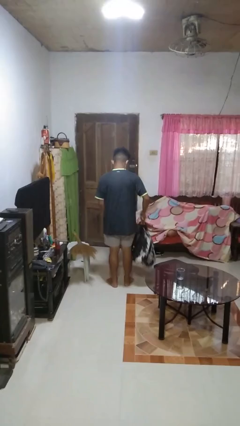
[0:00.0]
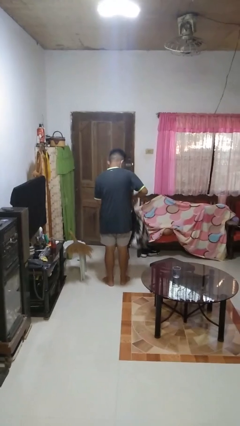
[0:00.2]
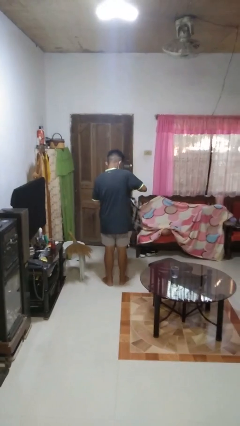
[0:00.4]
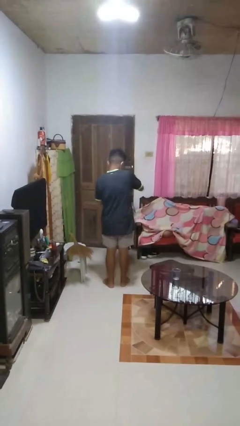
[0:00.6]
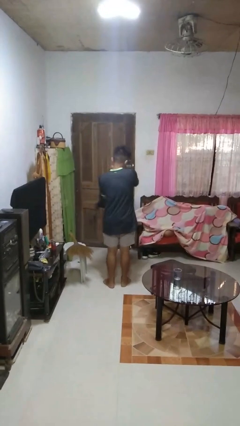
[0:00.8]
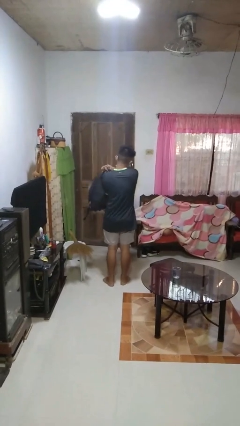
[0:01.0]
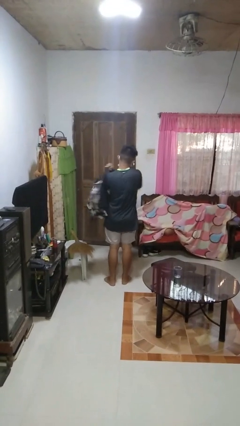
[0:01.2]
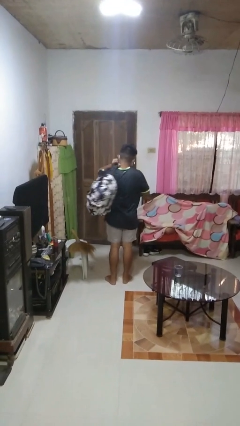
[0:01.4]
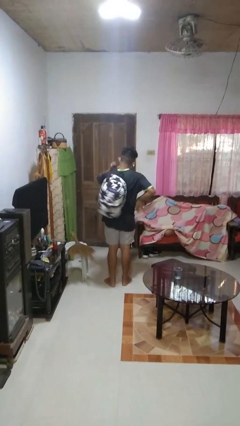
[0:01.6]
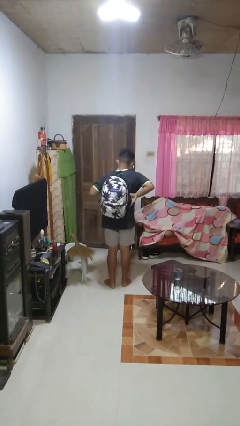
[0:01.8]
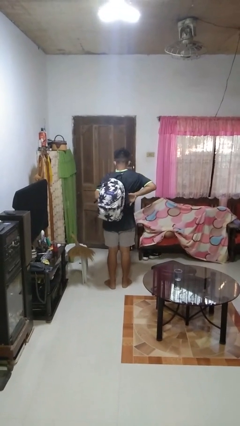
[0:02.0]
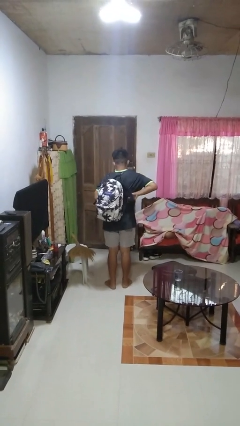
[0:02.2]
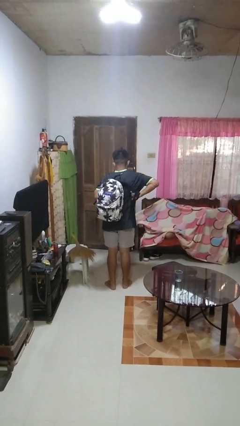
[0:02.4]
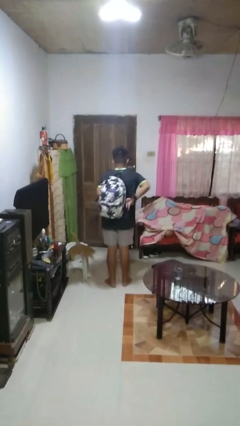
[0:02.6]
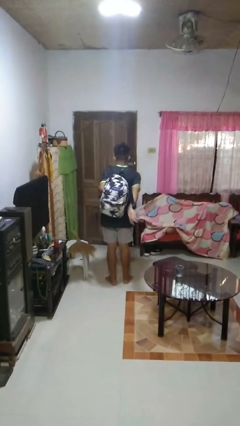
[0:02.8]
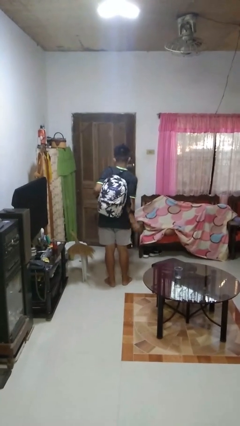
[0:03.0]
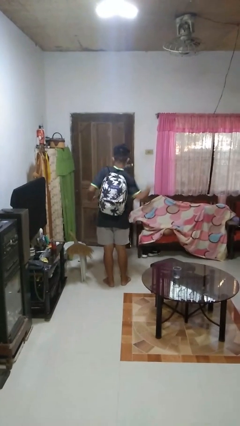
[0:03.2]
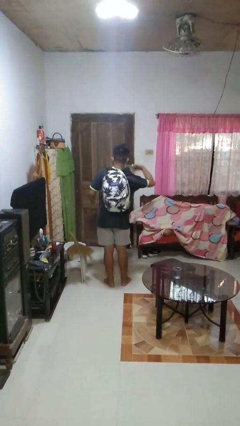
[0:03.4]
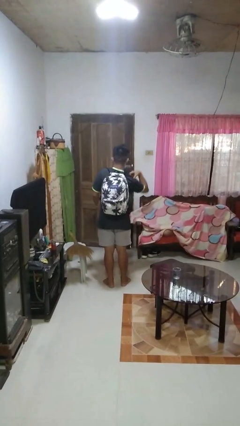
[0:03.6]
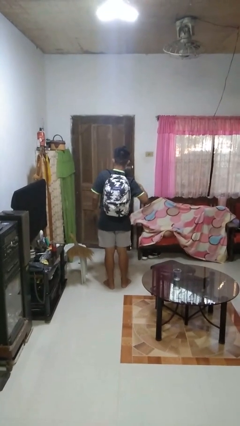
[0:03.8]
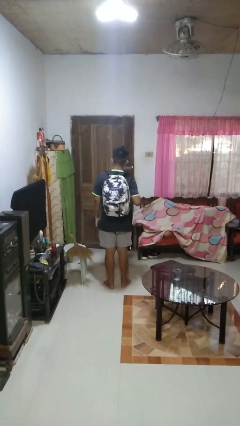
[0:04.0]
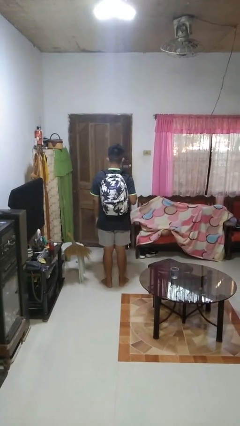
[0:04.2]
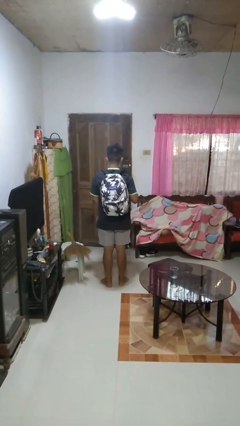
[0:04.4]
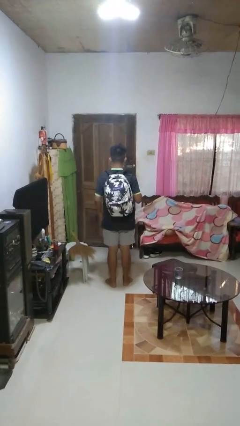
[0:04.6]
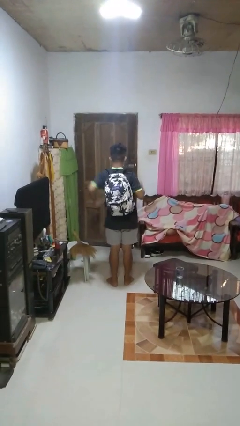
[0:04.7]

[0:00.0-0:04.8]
person puts on backpack

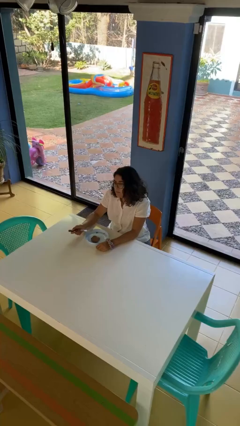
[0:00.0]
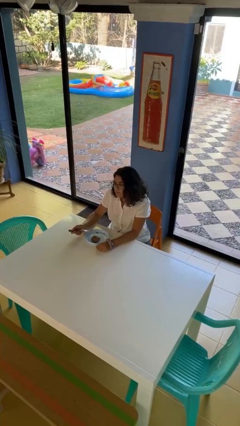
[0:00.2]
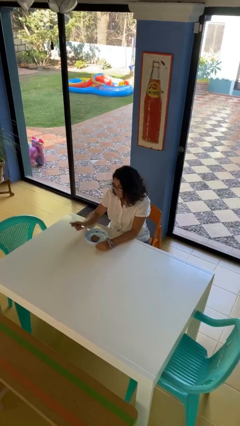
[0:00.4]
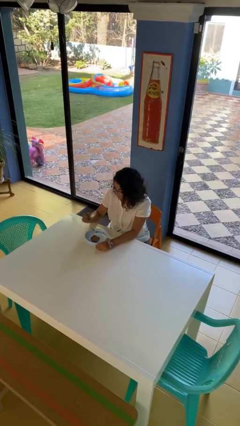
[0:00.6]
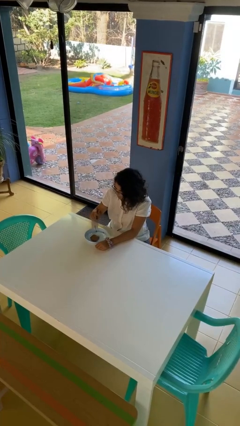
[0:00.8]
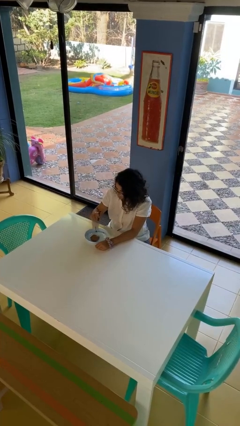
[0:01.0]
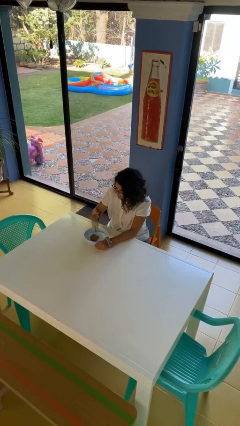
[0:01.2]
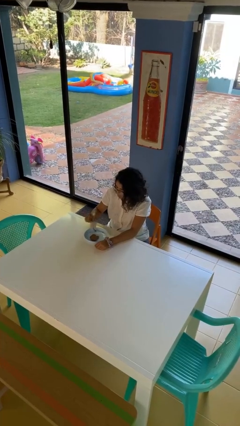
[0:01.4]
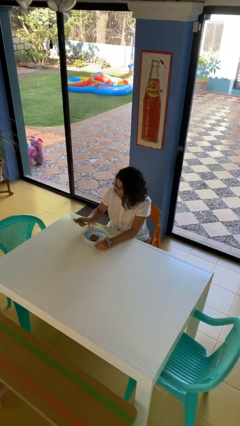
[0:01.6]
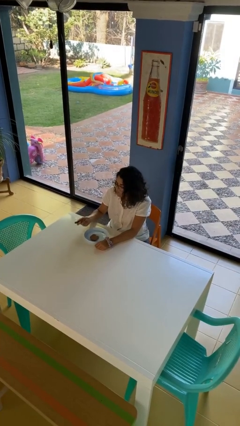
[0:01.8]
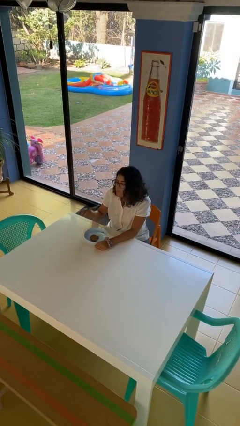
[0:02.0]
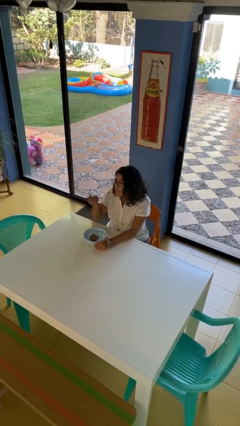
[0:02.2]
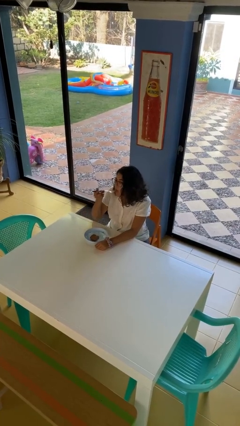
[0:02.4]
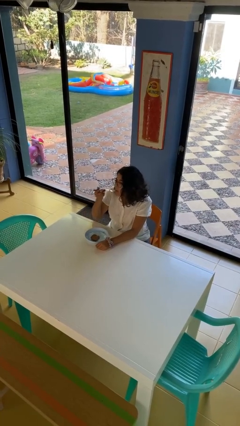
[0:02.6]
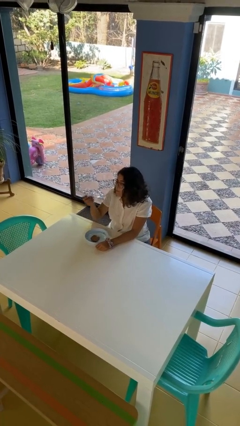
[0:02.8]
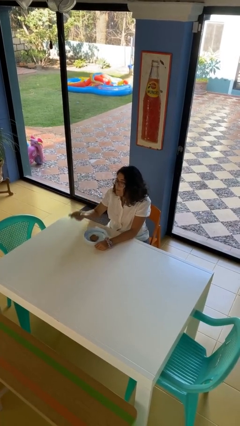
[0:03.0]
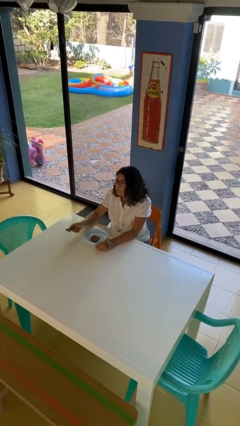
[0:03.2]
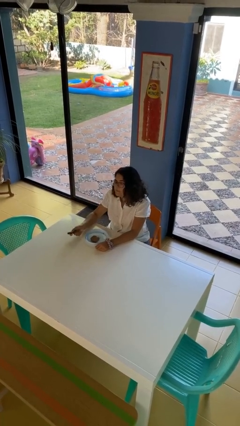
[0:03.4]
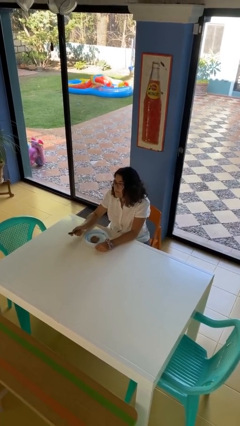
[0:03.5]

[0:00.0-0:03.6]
person eats with utensil

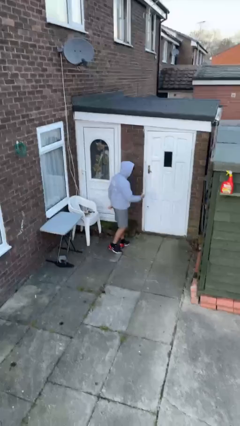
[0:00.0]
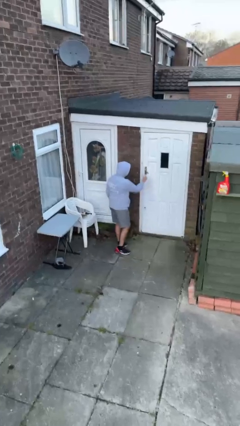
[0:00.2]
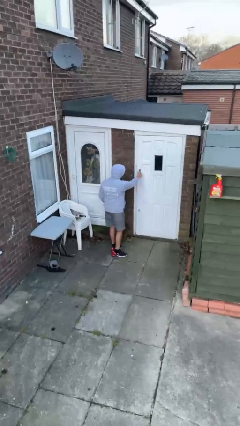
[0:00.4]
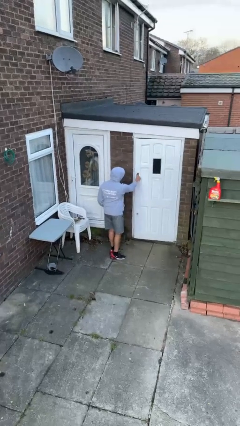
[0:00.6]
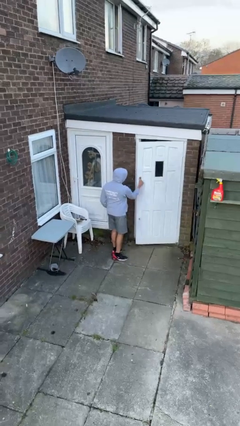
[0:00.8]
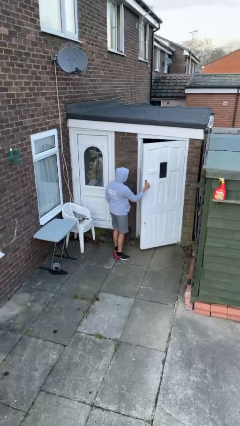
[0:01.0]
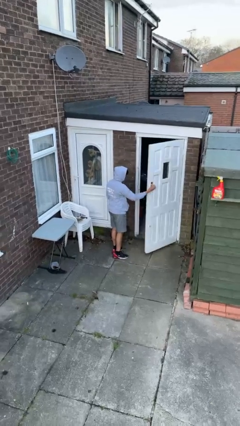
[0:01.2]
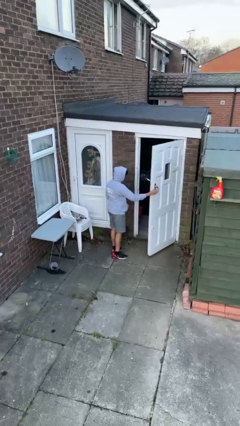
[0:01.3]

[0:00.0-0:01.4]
person opens facility door

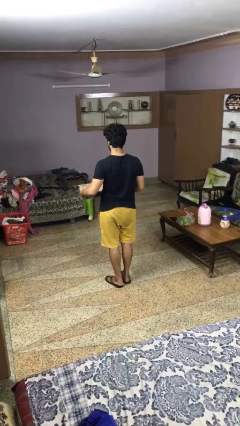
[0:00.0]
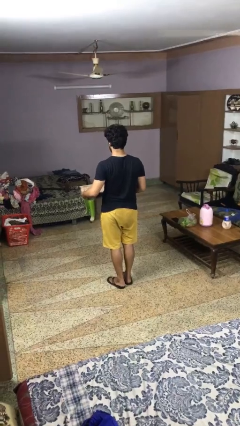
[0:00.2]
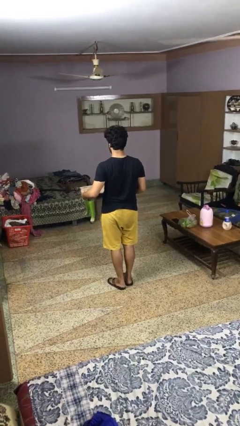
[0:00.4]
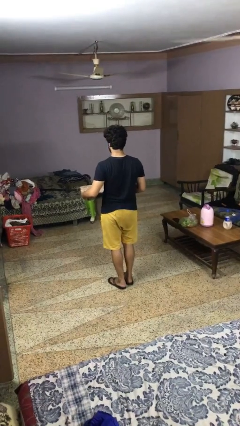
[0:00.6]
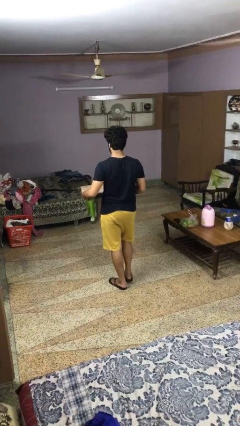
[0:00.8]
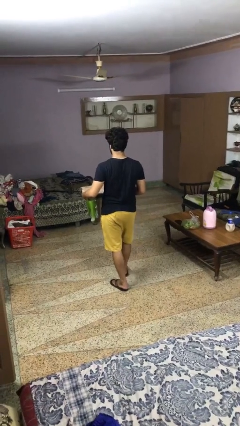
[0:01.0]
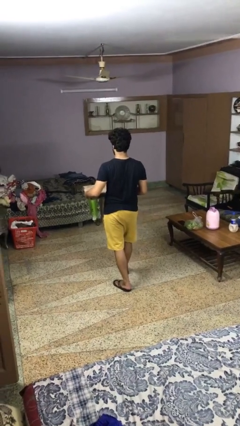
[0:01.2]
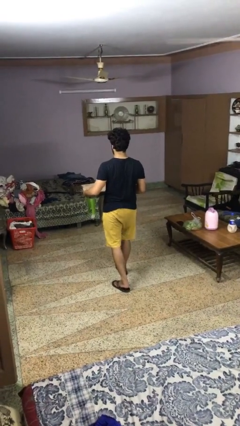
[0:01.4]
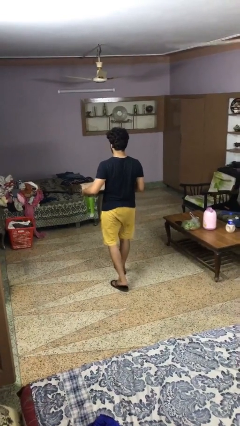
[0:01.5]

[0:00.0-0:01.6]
person carries furniture

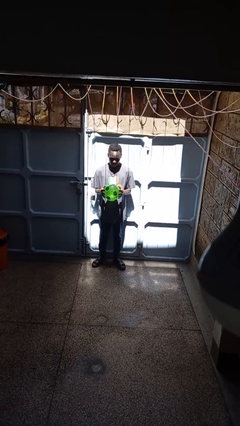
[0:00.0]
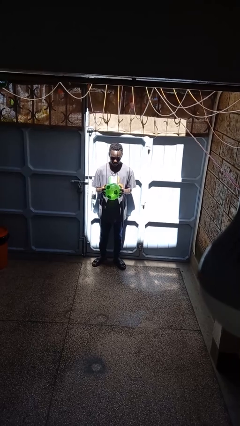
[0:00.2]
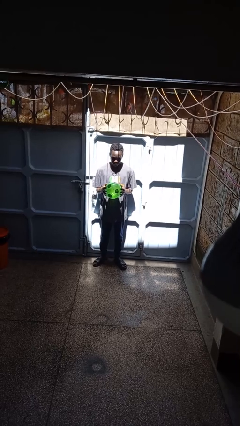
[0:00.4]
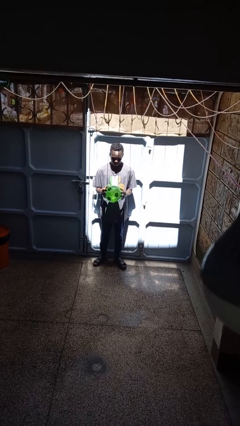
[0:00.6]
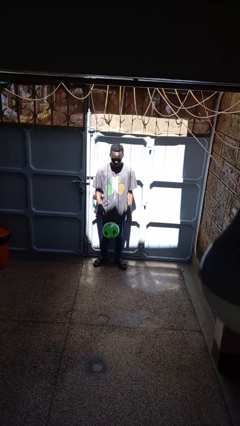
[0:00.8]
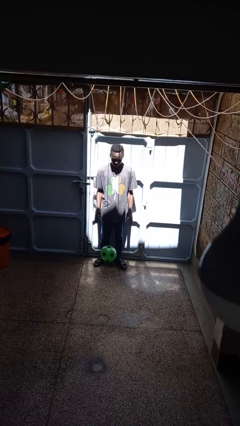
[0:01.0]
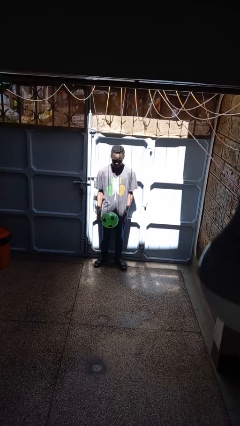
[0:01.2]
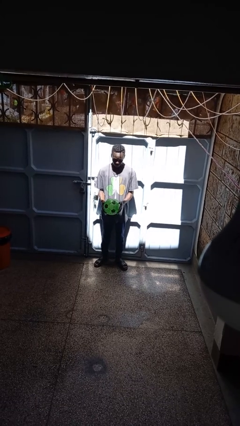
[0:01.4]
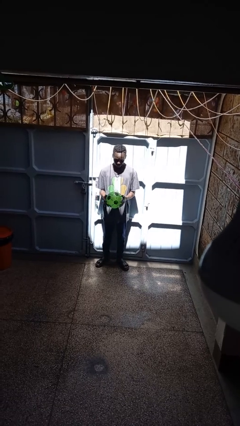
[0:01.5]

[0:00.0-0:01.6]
person bounces ball on floor

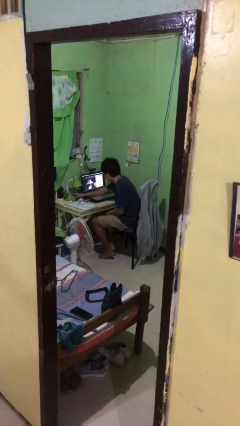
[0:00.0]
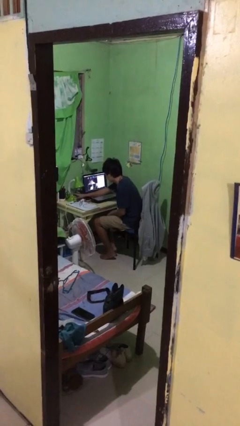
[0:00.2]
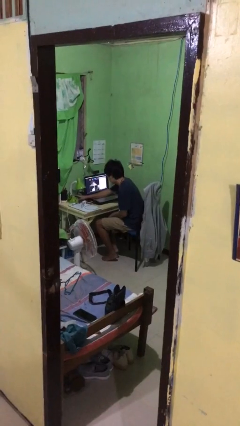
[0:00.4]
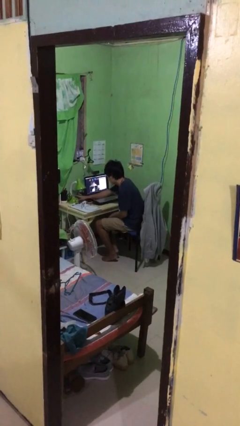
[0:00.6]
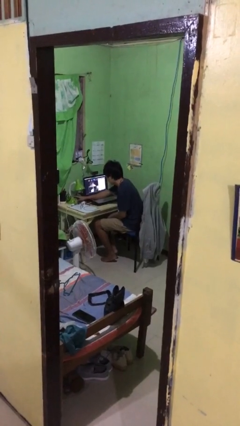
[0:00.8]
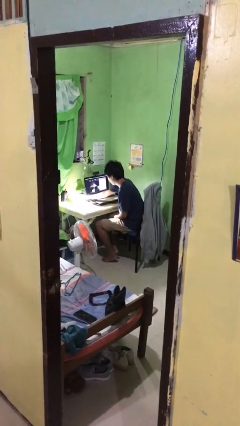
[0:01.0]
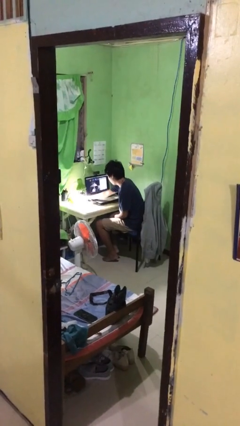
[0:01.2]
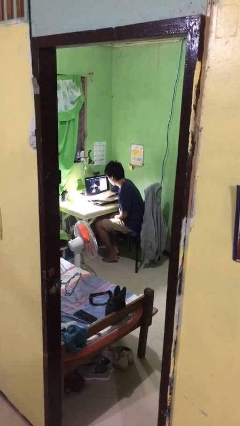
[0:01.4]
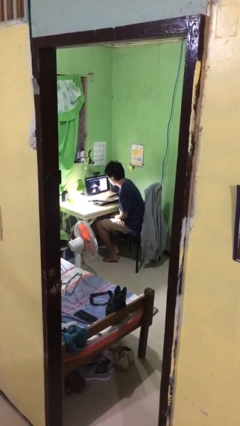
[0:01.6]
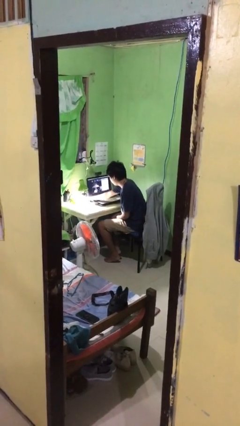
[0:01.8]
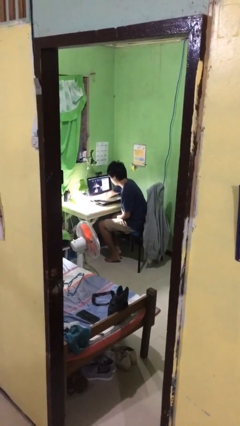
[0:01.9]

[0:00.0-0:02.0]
person turns on lamp

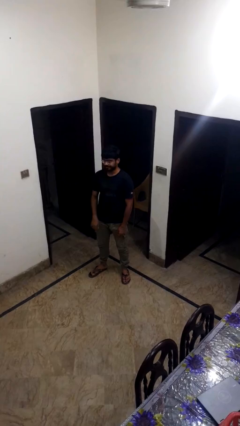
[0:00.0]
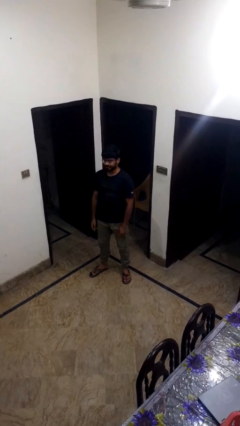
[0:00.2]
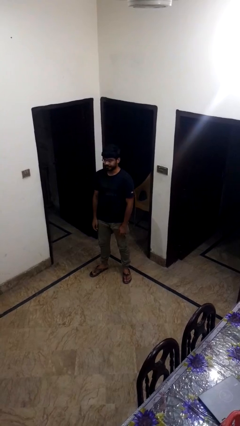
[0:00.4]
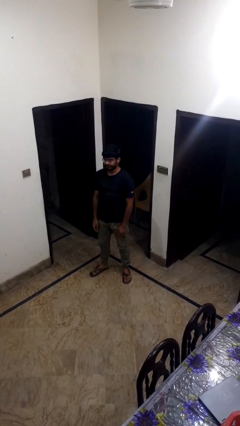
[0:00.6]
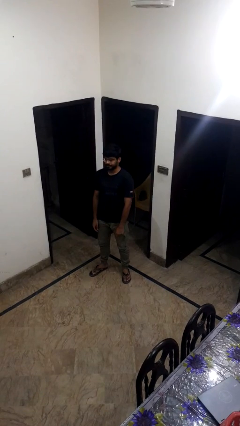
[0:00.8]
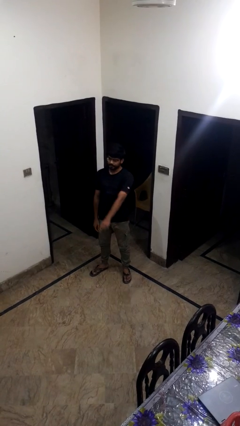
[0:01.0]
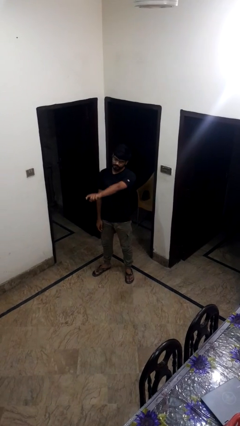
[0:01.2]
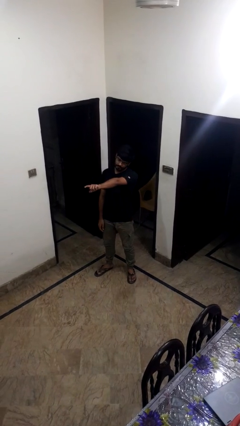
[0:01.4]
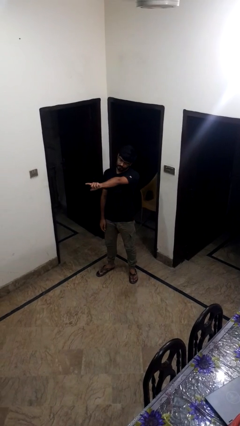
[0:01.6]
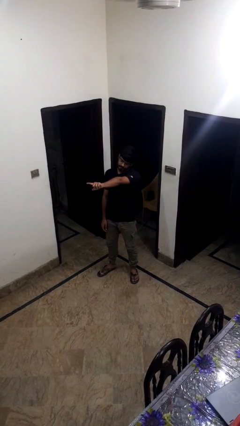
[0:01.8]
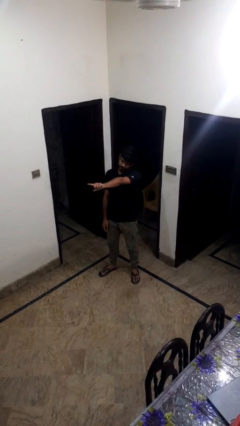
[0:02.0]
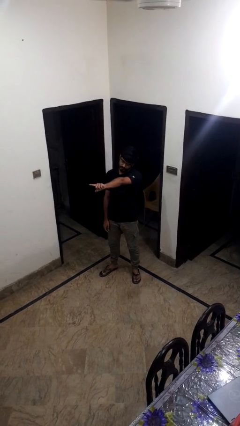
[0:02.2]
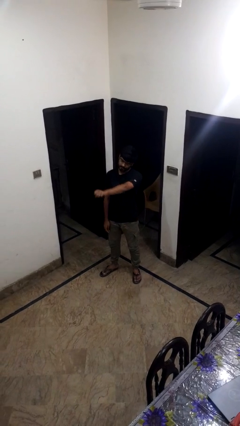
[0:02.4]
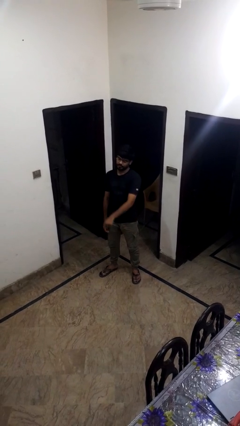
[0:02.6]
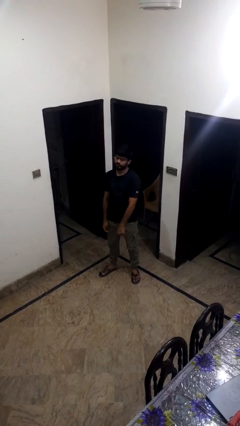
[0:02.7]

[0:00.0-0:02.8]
person points at person
